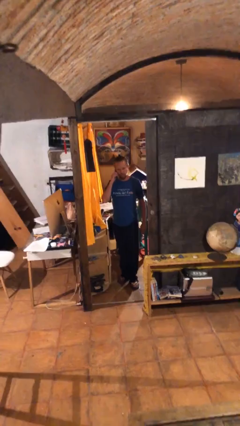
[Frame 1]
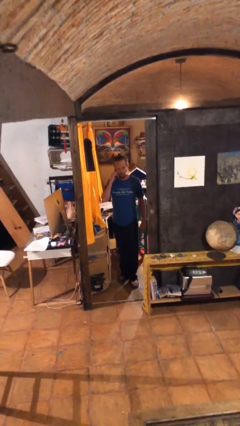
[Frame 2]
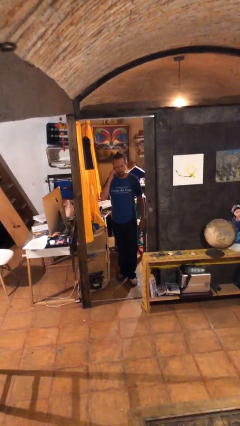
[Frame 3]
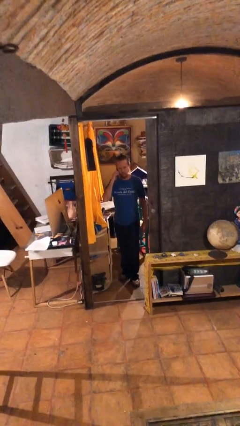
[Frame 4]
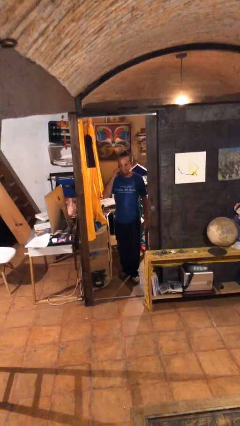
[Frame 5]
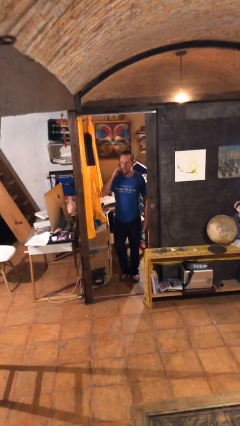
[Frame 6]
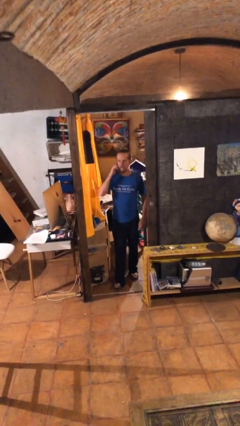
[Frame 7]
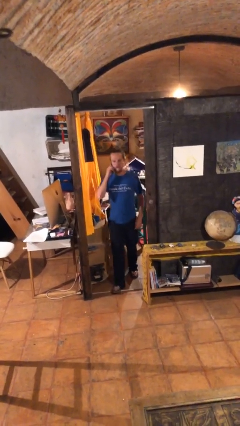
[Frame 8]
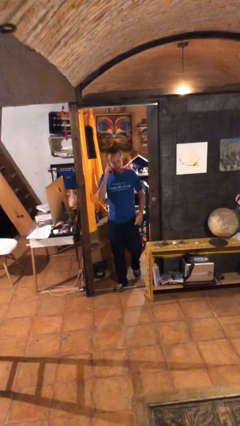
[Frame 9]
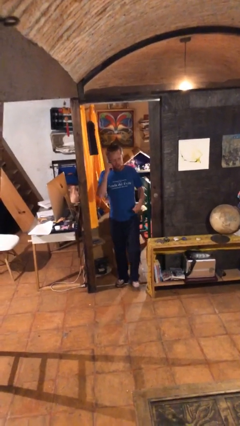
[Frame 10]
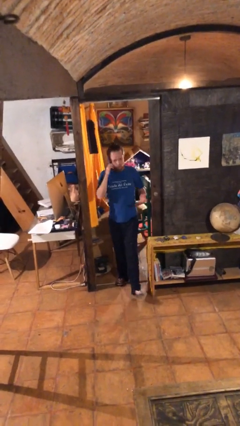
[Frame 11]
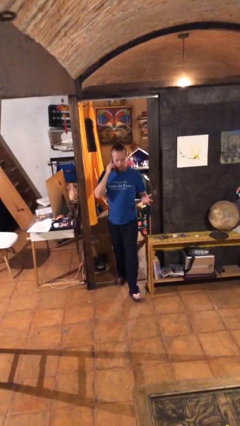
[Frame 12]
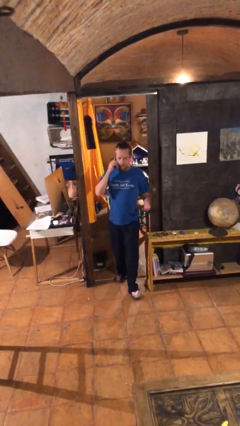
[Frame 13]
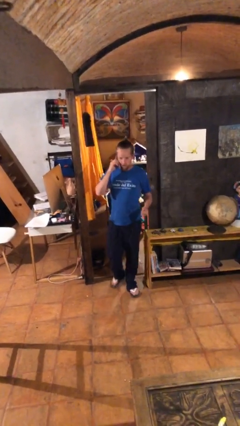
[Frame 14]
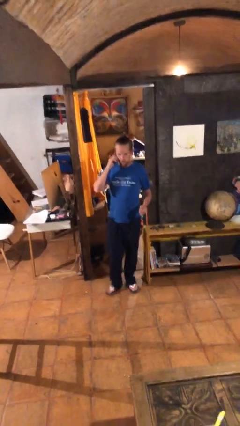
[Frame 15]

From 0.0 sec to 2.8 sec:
person enters scene through structure

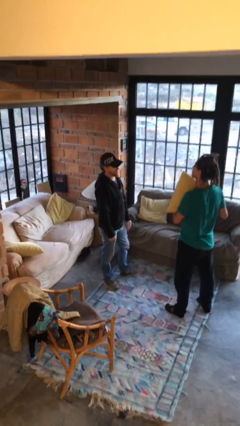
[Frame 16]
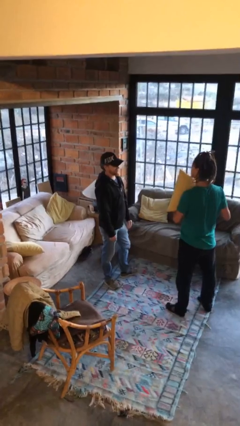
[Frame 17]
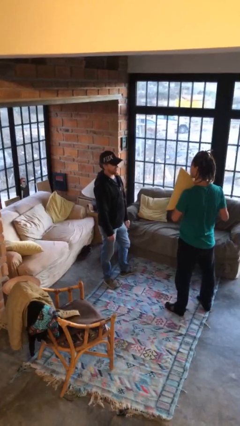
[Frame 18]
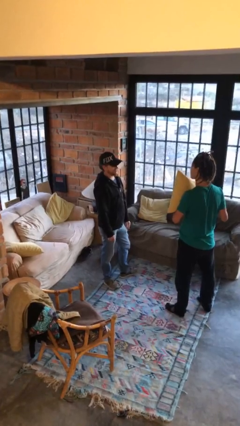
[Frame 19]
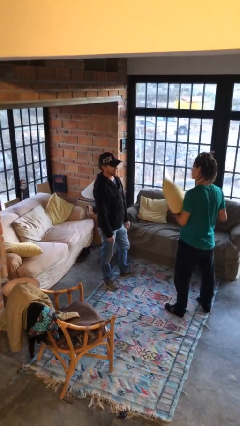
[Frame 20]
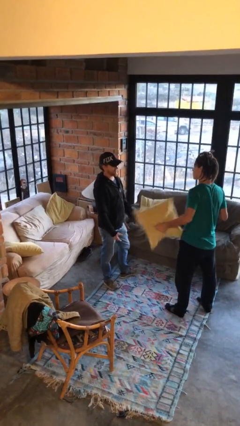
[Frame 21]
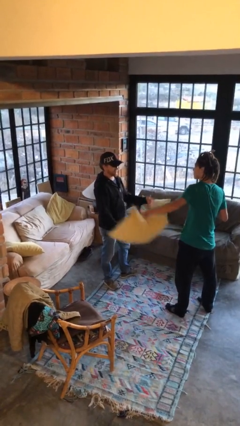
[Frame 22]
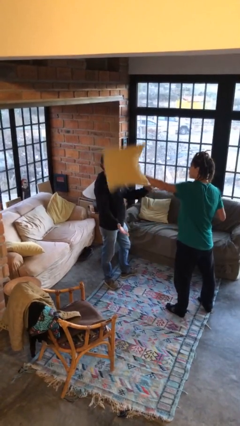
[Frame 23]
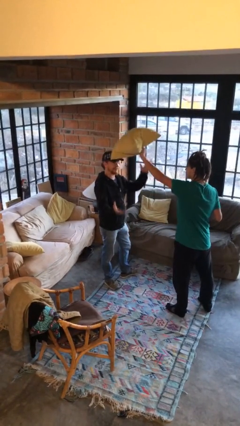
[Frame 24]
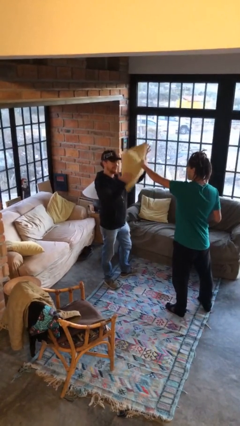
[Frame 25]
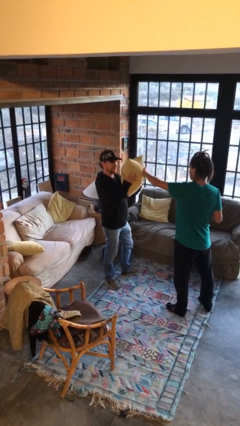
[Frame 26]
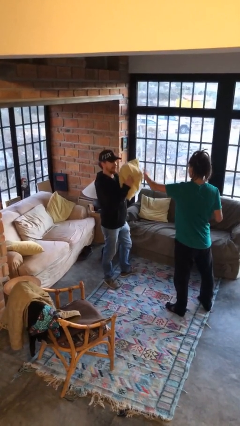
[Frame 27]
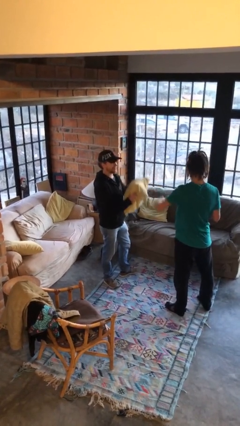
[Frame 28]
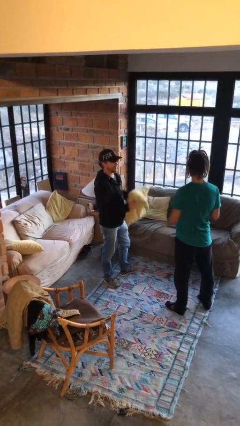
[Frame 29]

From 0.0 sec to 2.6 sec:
person transfers object to person

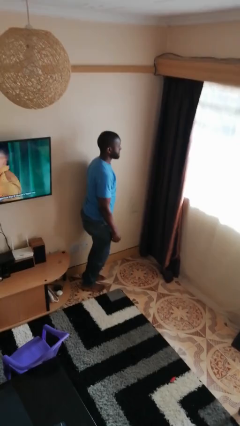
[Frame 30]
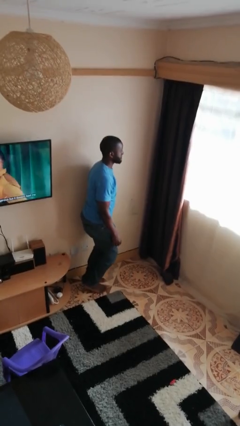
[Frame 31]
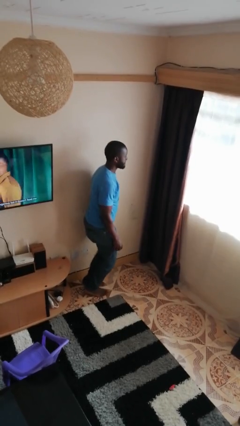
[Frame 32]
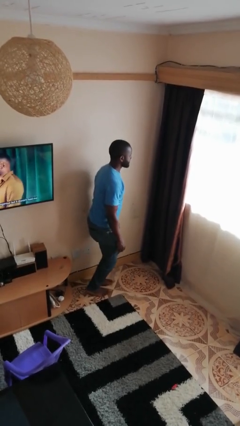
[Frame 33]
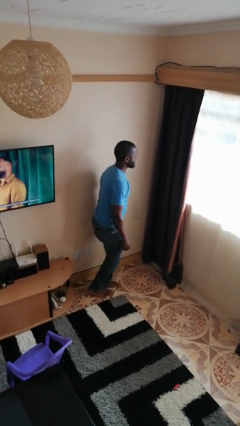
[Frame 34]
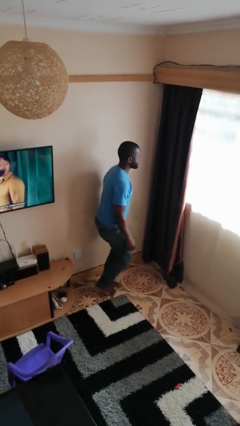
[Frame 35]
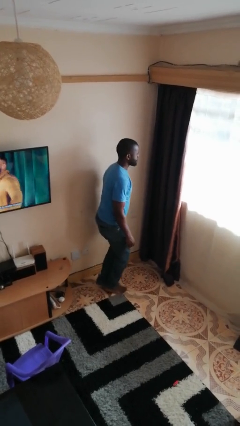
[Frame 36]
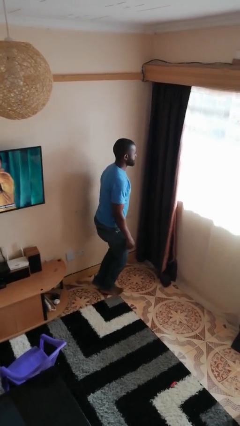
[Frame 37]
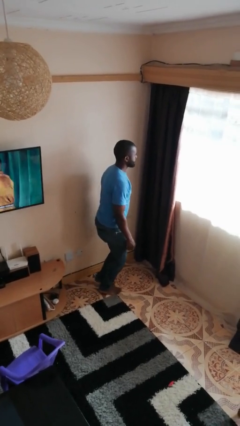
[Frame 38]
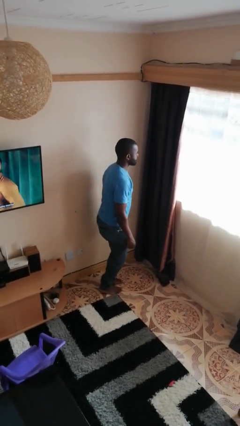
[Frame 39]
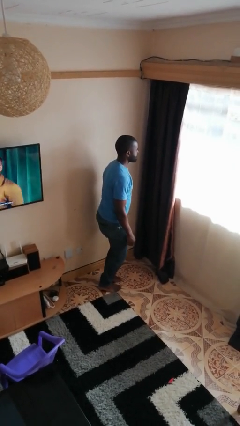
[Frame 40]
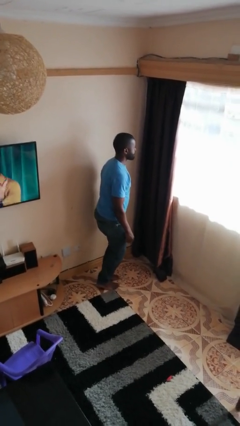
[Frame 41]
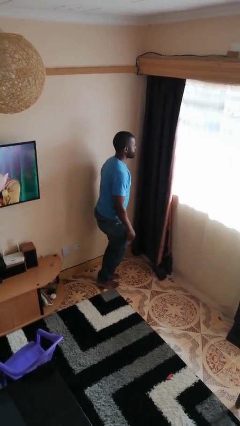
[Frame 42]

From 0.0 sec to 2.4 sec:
person walks tiptoe

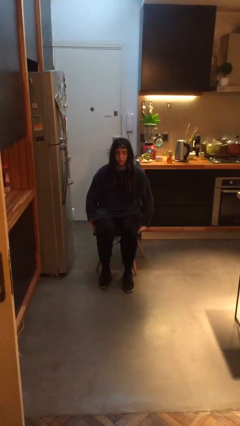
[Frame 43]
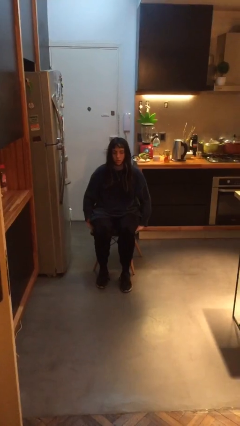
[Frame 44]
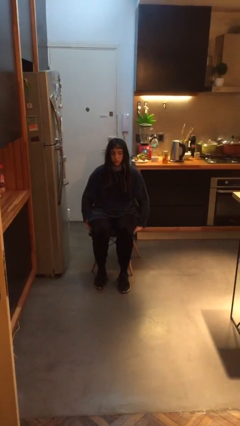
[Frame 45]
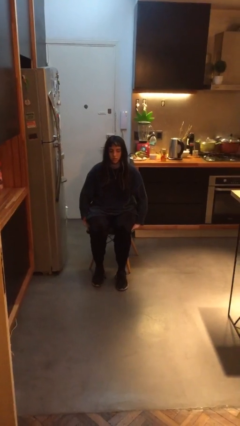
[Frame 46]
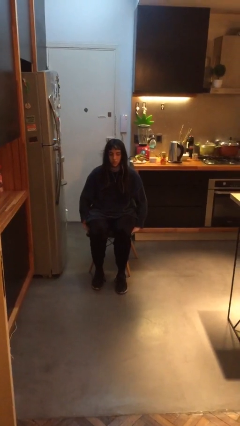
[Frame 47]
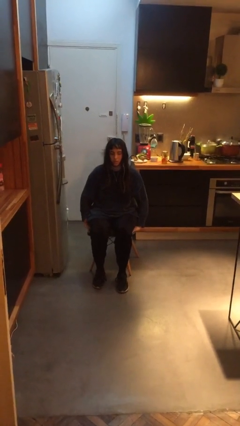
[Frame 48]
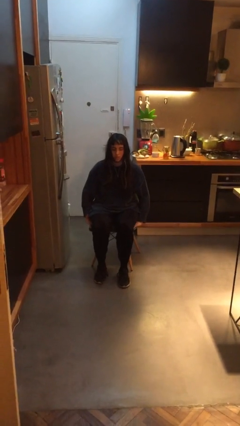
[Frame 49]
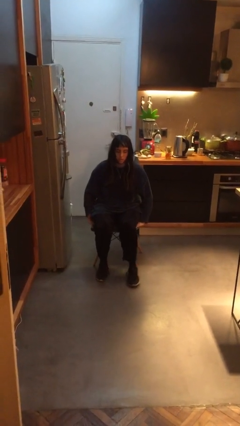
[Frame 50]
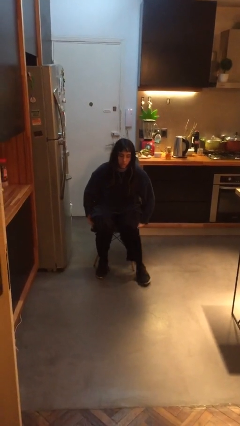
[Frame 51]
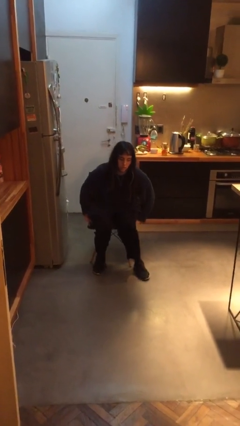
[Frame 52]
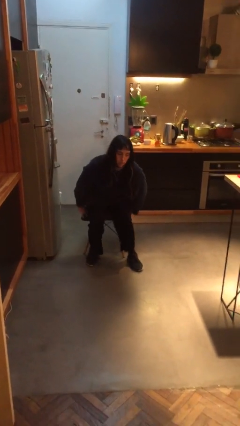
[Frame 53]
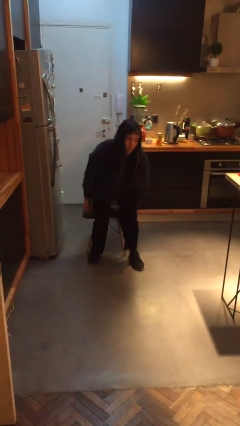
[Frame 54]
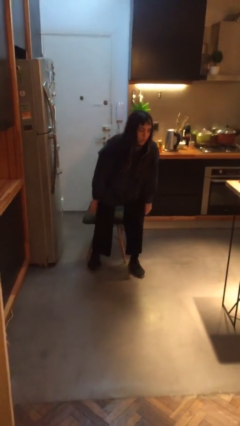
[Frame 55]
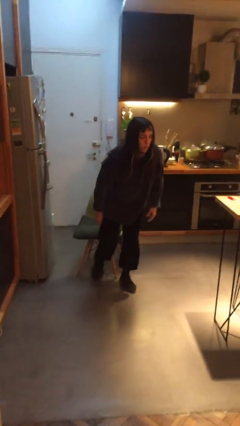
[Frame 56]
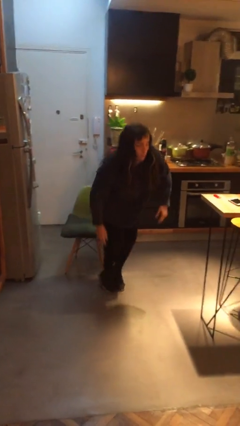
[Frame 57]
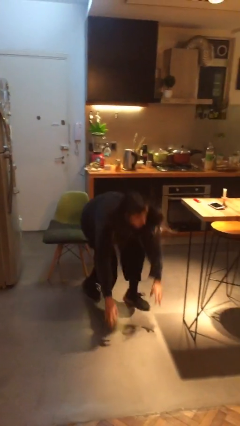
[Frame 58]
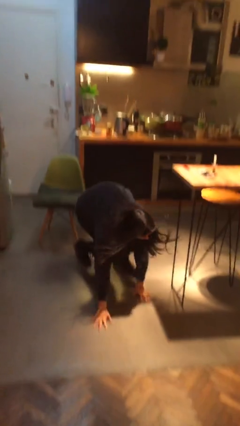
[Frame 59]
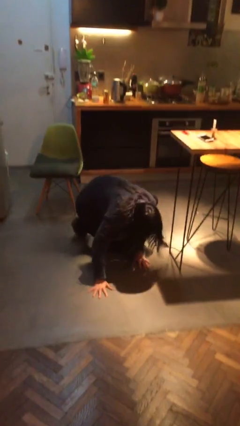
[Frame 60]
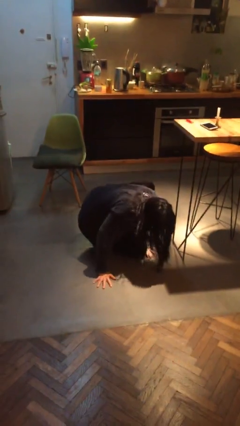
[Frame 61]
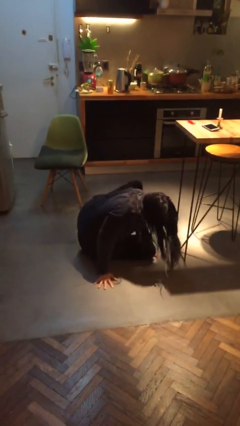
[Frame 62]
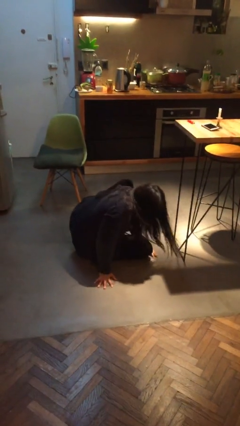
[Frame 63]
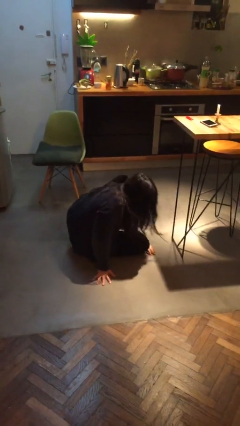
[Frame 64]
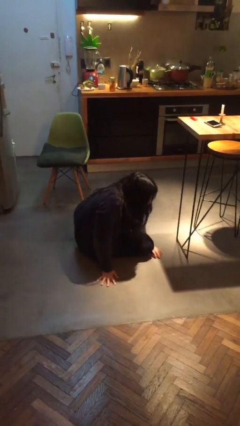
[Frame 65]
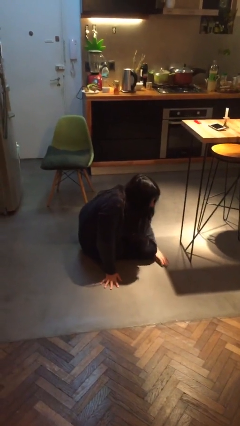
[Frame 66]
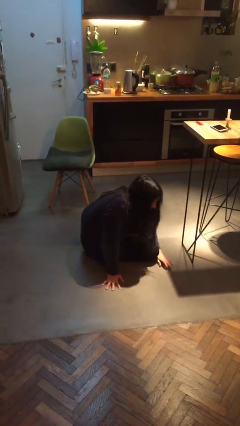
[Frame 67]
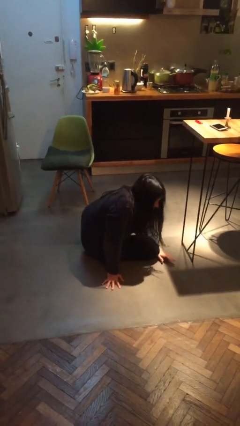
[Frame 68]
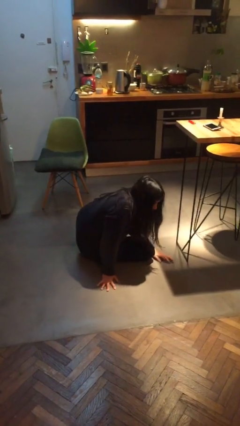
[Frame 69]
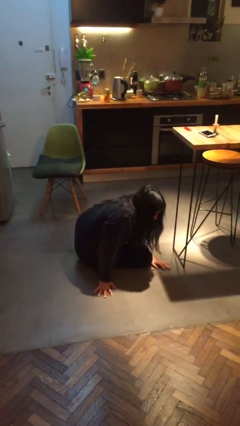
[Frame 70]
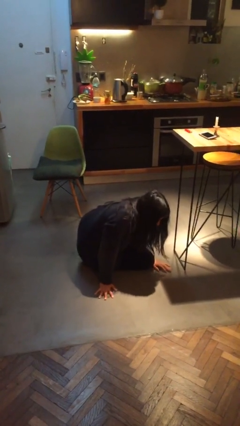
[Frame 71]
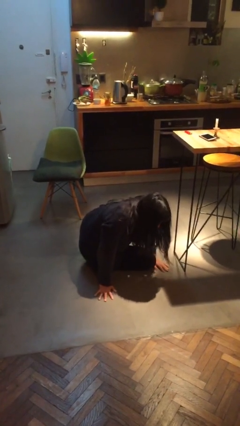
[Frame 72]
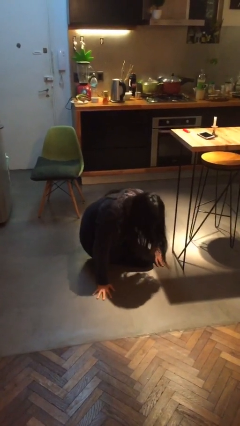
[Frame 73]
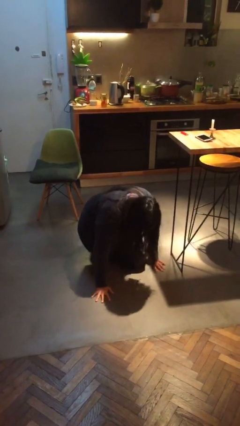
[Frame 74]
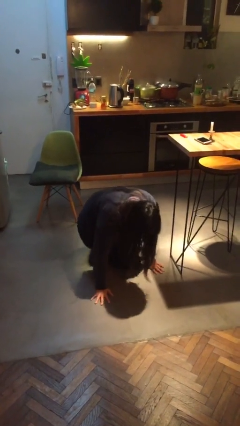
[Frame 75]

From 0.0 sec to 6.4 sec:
person falls from chair

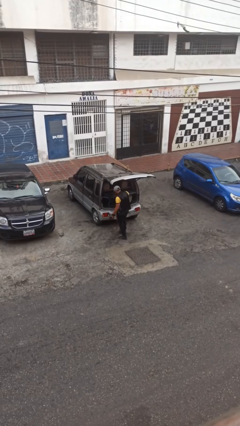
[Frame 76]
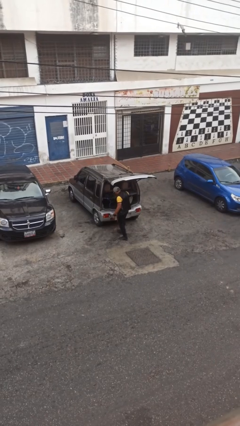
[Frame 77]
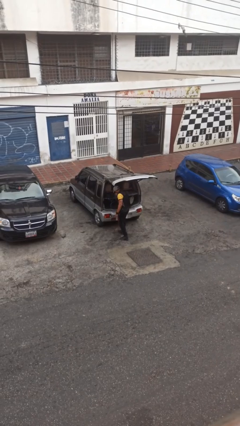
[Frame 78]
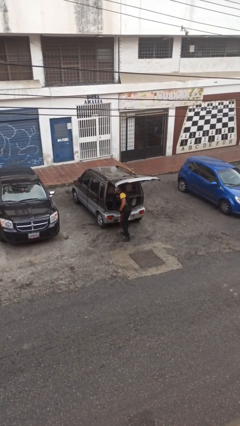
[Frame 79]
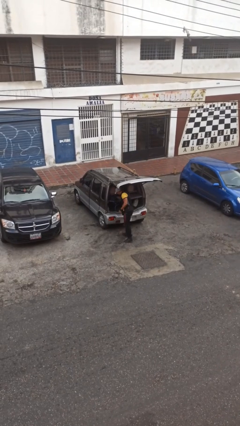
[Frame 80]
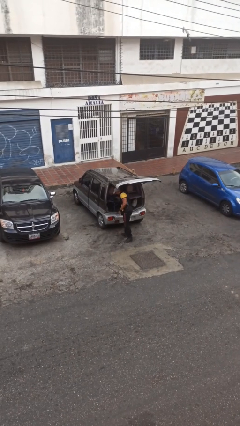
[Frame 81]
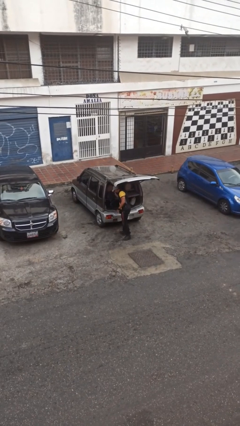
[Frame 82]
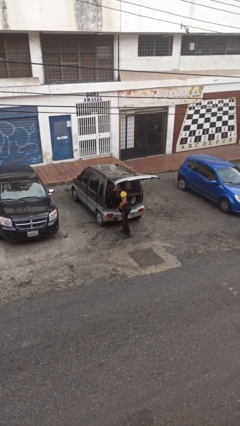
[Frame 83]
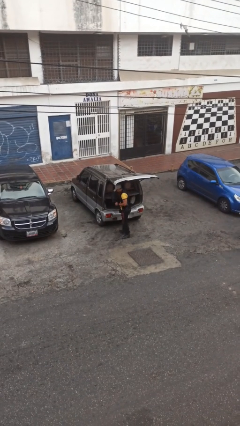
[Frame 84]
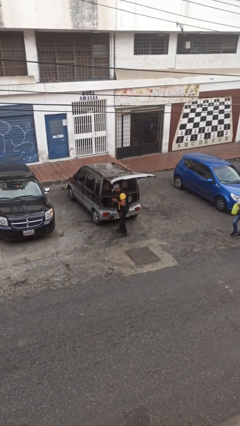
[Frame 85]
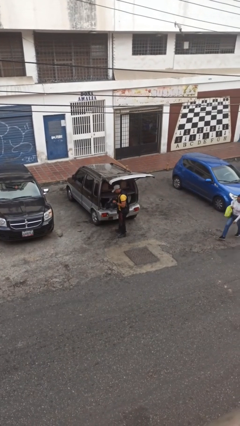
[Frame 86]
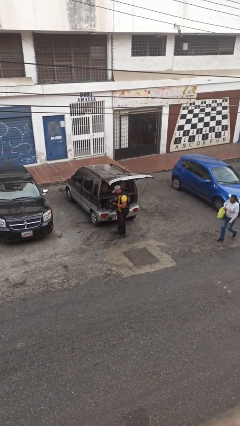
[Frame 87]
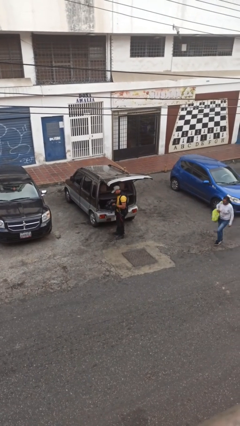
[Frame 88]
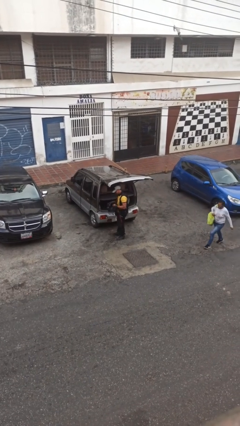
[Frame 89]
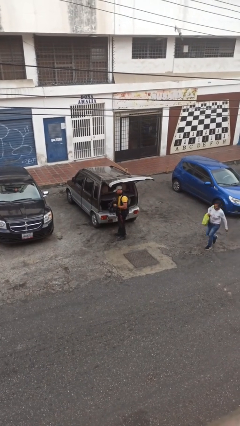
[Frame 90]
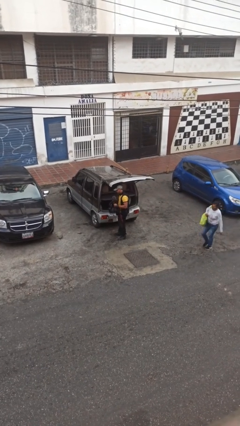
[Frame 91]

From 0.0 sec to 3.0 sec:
person unloads car

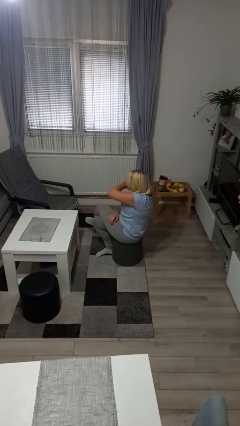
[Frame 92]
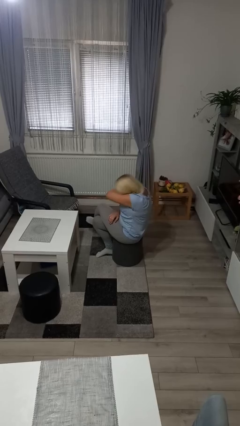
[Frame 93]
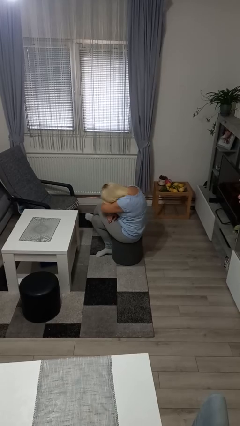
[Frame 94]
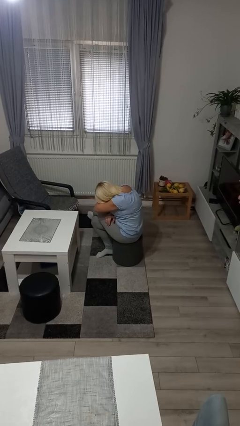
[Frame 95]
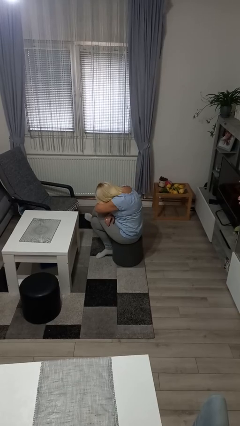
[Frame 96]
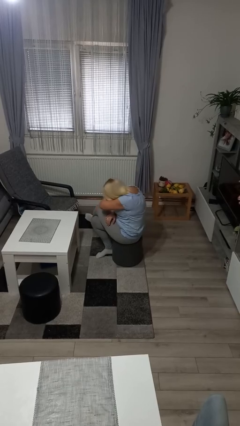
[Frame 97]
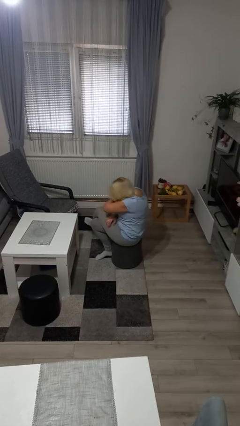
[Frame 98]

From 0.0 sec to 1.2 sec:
person sneezes into arm
